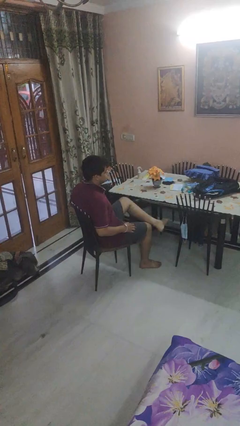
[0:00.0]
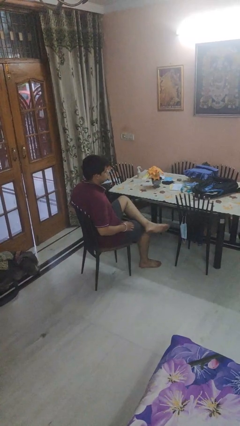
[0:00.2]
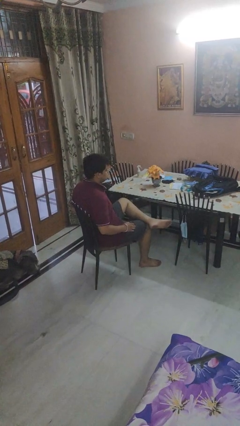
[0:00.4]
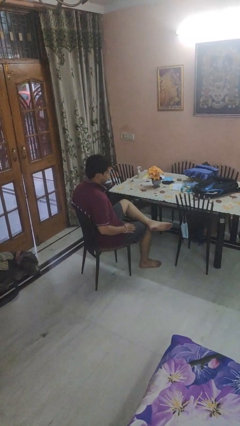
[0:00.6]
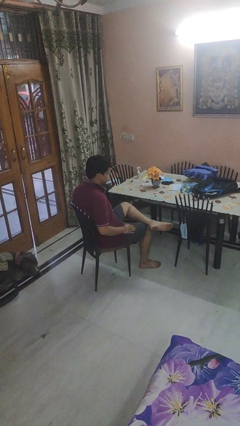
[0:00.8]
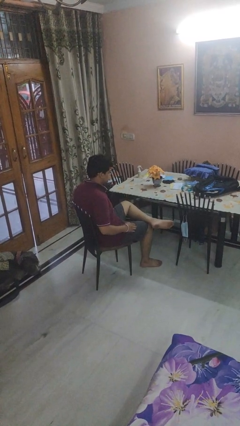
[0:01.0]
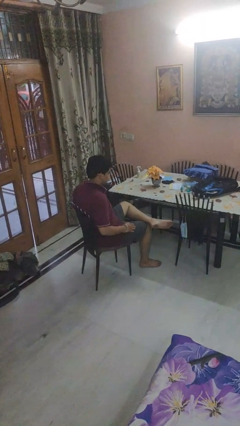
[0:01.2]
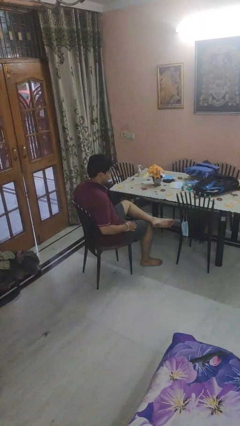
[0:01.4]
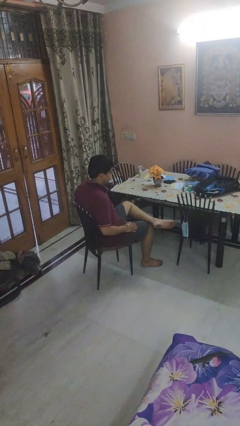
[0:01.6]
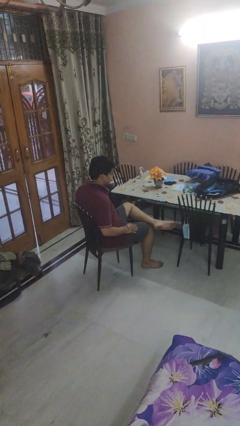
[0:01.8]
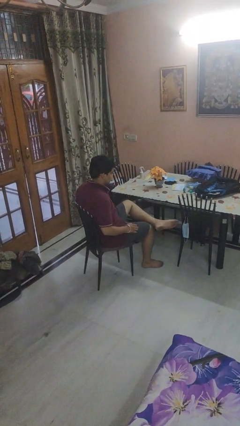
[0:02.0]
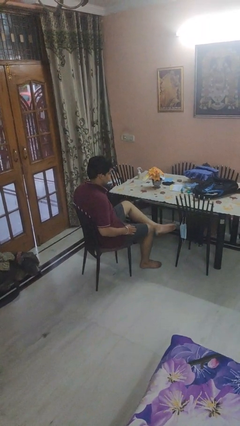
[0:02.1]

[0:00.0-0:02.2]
person crosses legs

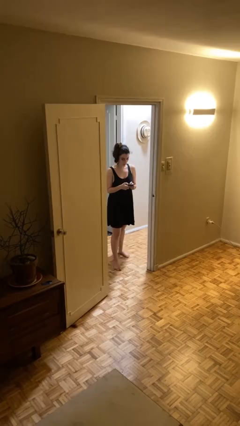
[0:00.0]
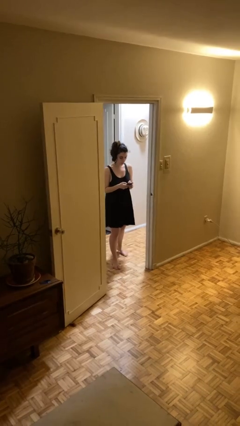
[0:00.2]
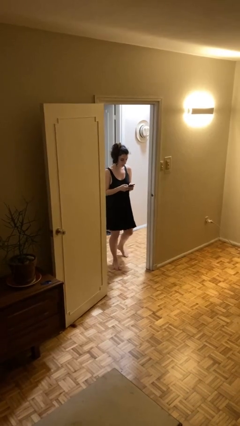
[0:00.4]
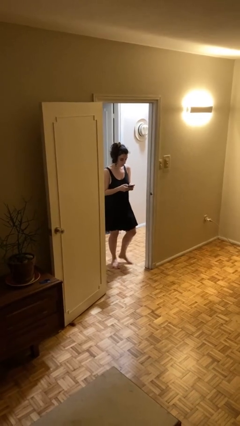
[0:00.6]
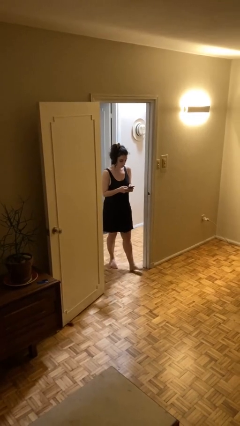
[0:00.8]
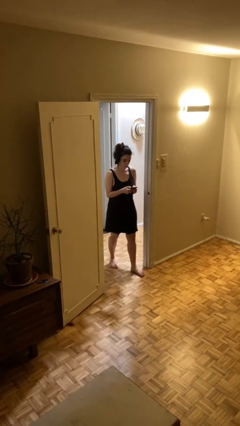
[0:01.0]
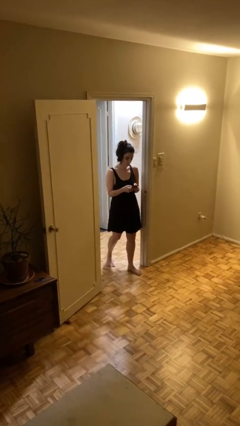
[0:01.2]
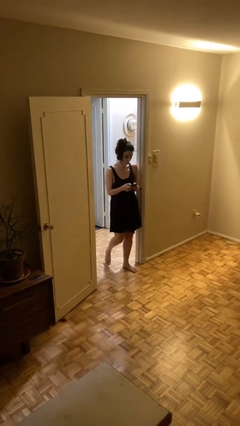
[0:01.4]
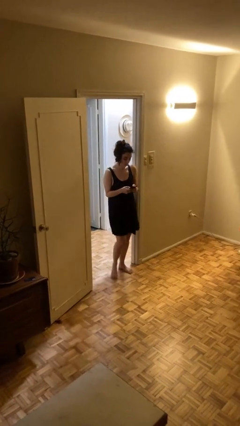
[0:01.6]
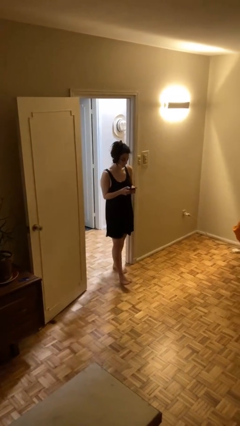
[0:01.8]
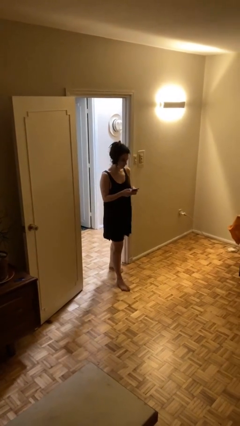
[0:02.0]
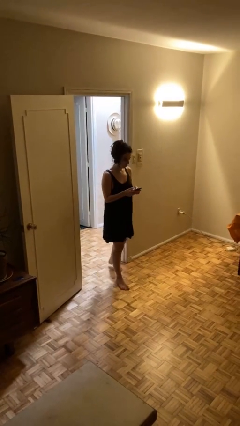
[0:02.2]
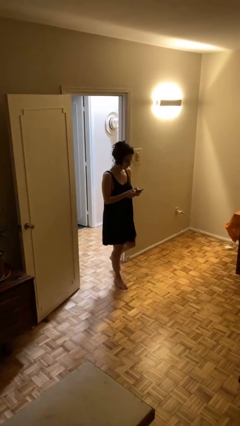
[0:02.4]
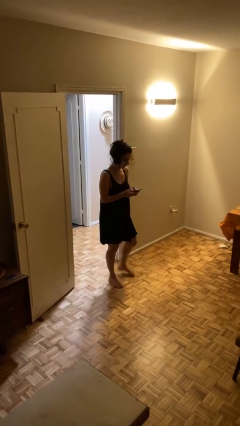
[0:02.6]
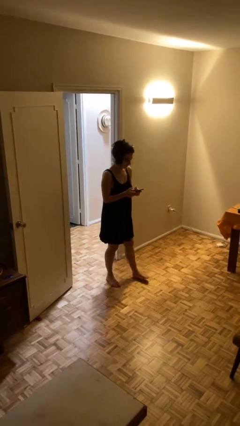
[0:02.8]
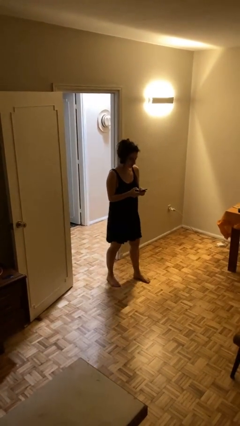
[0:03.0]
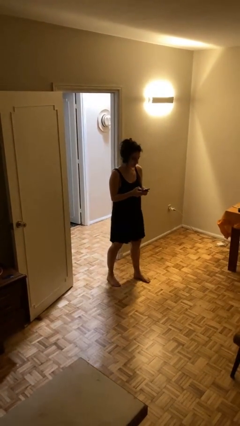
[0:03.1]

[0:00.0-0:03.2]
person enters scene through structure

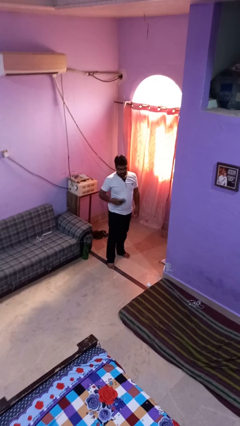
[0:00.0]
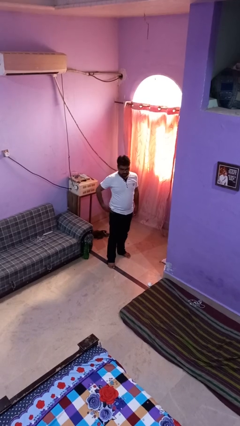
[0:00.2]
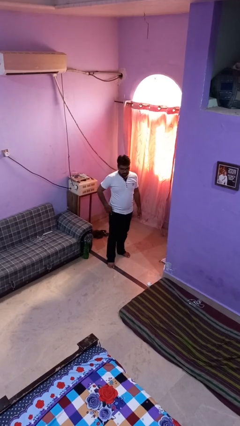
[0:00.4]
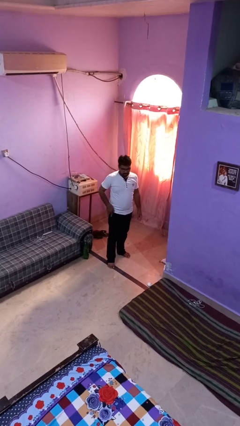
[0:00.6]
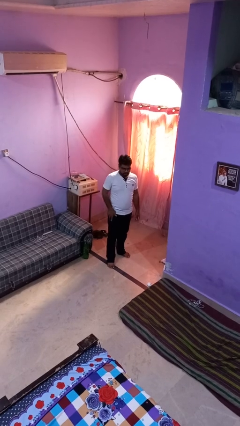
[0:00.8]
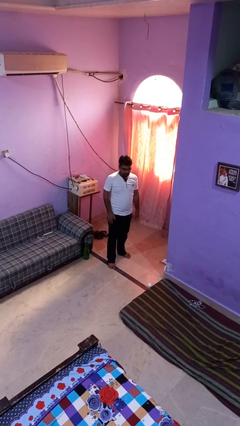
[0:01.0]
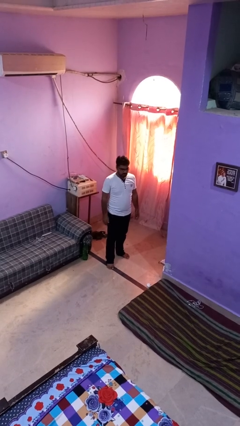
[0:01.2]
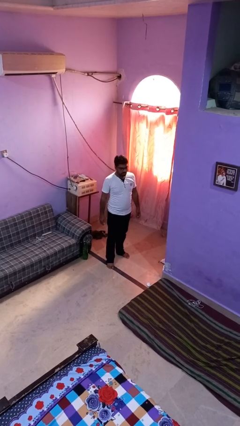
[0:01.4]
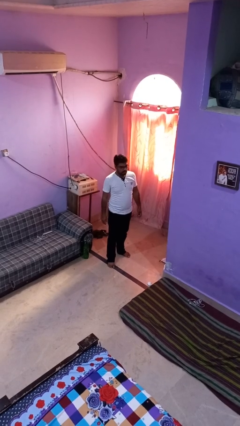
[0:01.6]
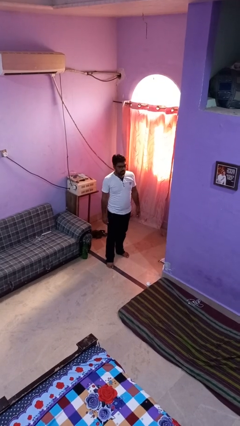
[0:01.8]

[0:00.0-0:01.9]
person puts phone into pocket

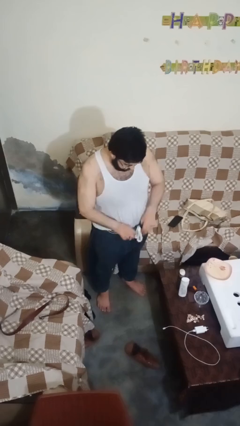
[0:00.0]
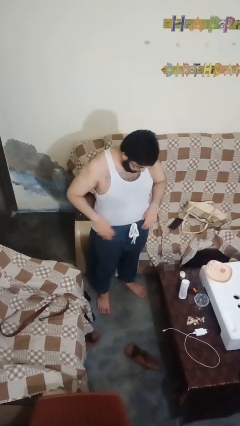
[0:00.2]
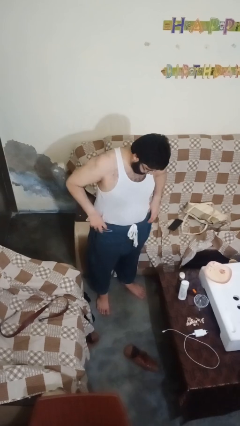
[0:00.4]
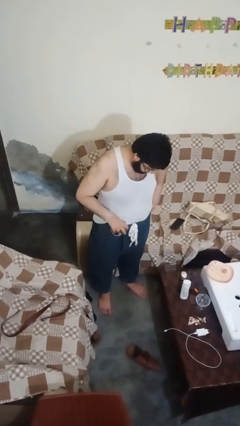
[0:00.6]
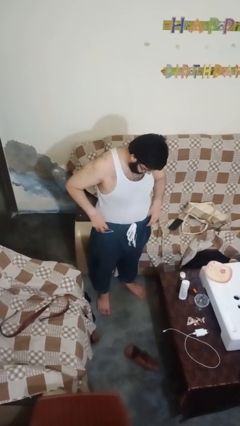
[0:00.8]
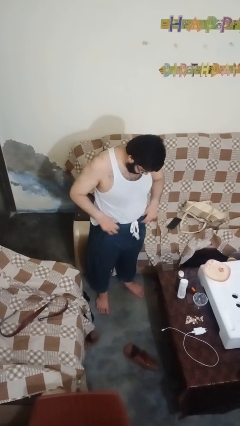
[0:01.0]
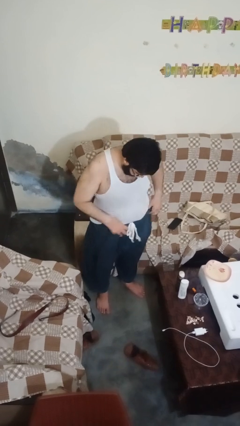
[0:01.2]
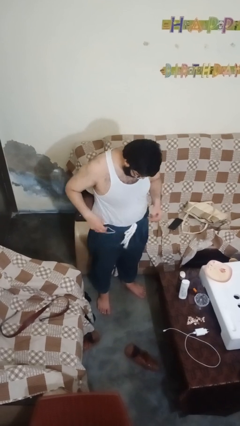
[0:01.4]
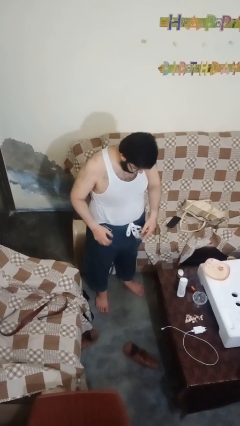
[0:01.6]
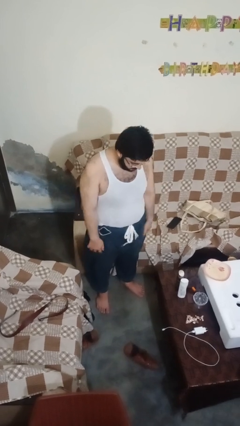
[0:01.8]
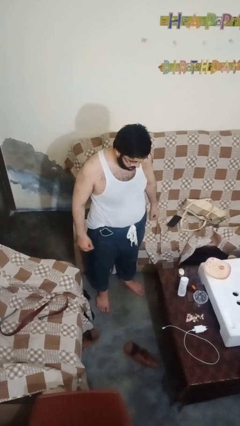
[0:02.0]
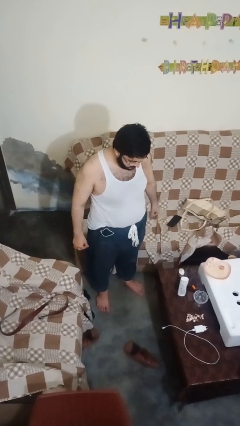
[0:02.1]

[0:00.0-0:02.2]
person hikes up pants

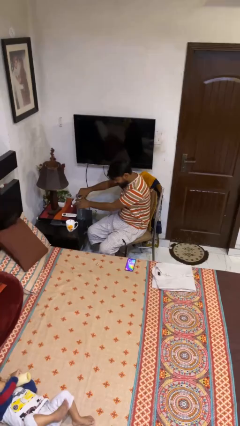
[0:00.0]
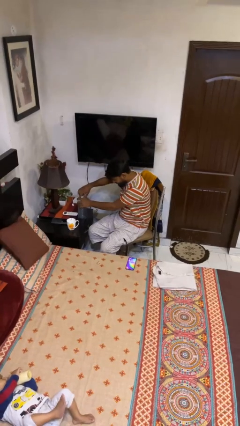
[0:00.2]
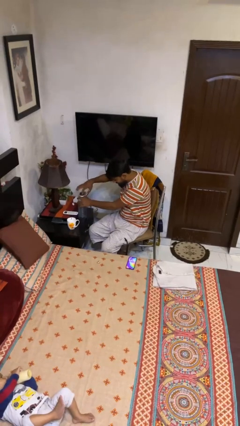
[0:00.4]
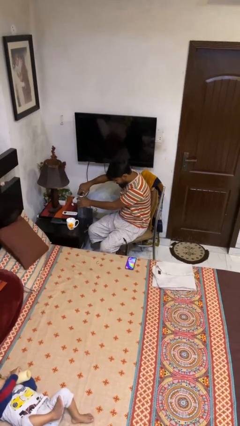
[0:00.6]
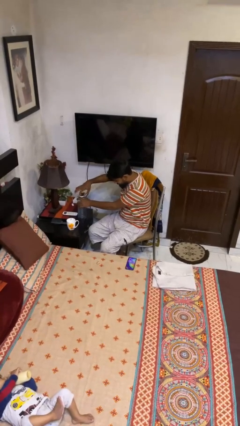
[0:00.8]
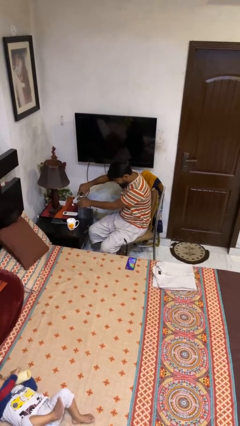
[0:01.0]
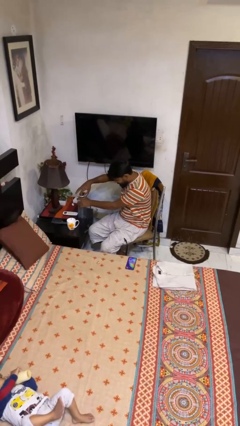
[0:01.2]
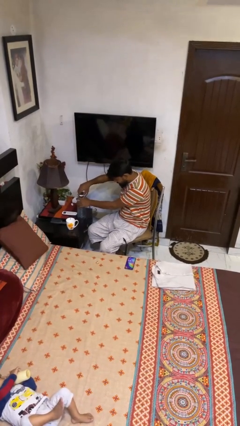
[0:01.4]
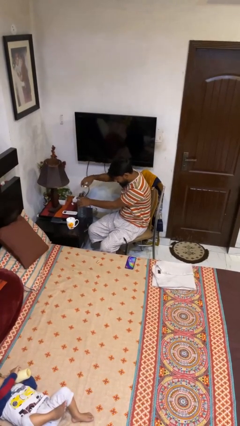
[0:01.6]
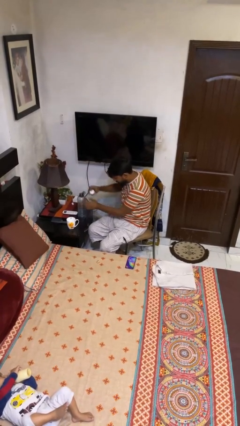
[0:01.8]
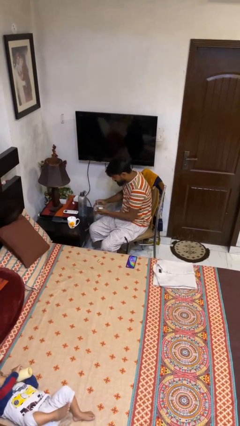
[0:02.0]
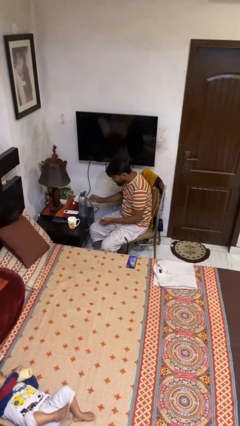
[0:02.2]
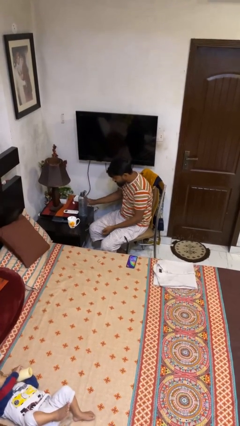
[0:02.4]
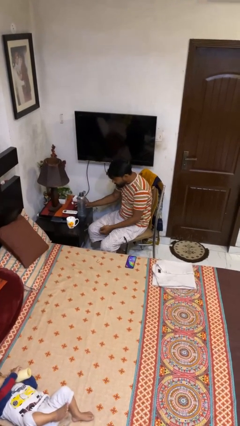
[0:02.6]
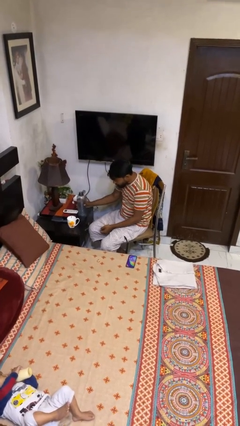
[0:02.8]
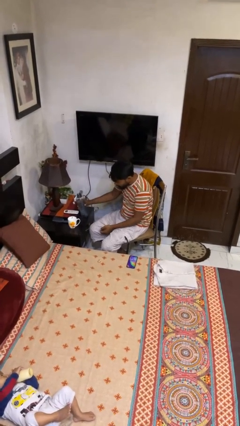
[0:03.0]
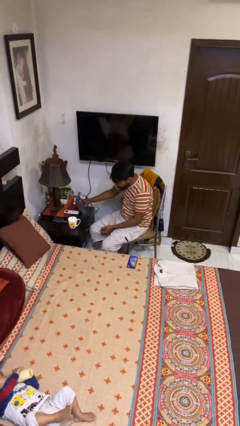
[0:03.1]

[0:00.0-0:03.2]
person unscrews lid from bottle

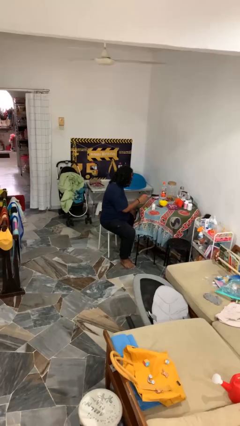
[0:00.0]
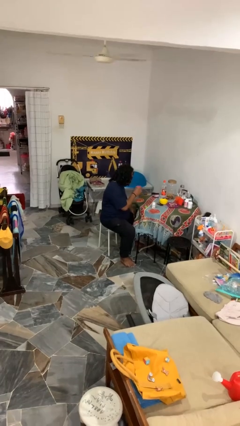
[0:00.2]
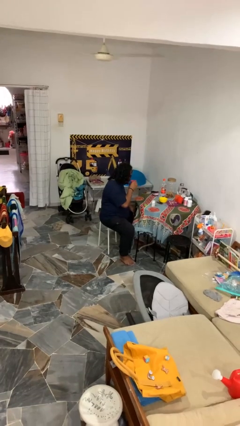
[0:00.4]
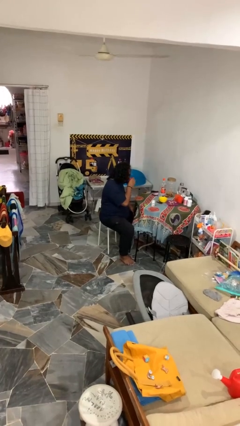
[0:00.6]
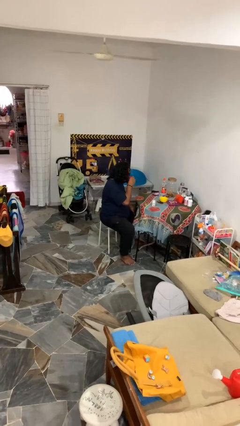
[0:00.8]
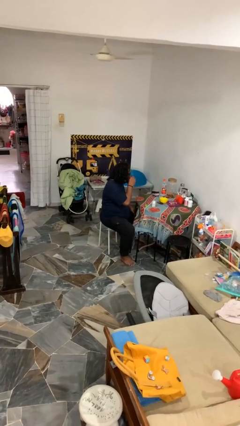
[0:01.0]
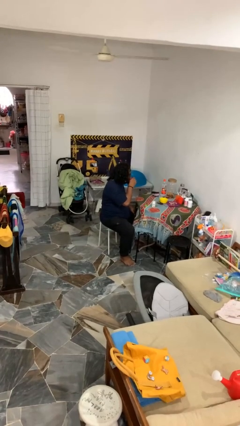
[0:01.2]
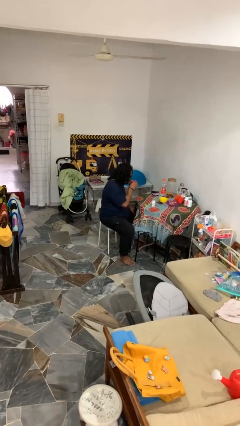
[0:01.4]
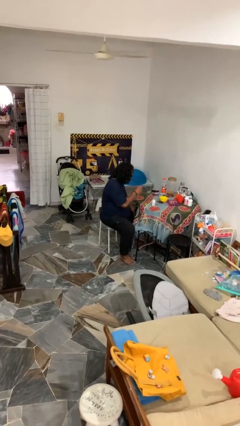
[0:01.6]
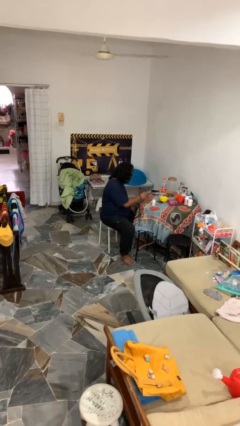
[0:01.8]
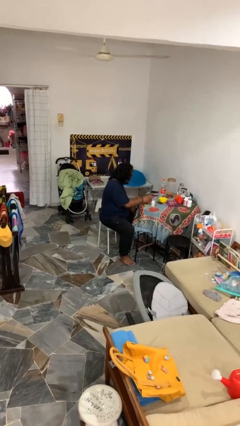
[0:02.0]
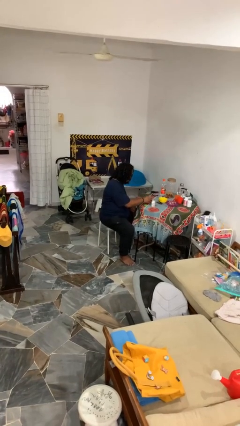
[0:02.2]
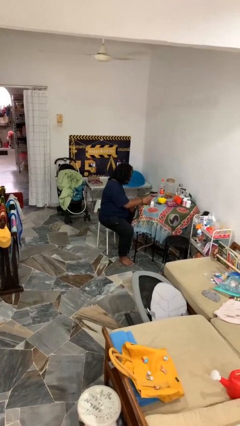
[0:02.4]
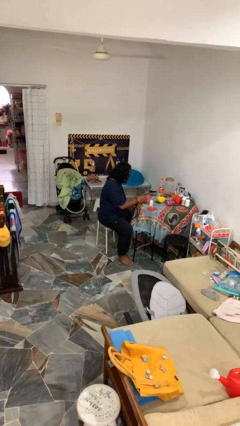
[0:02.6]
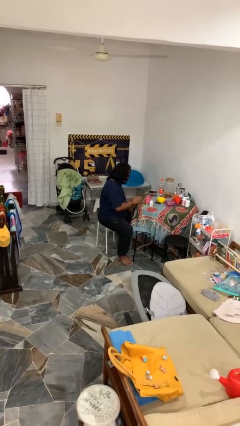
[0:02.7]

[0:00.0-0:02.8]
person drinks from cup

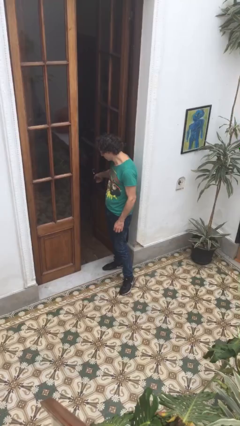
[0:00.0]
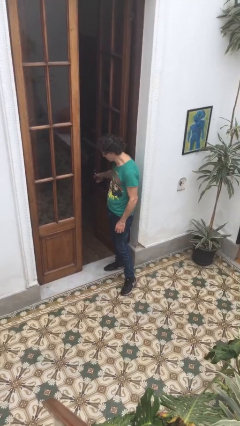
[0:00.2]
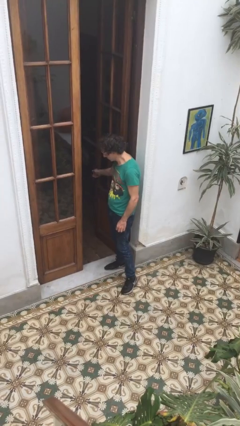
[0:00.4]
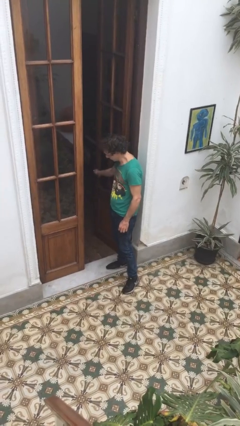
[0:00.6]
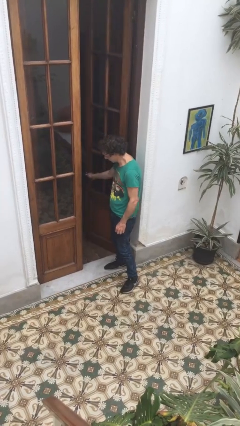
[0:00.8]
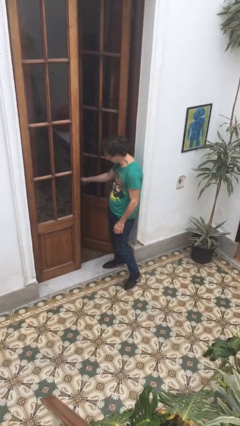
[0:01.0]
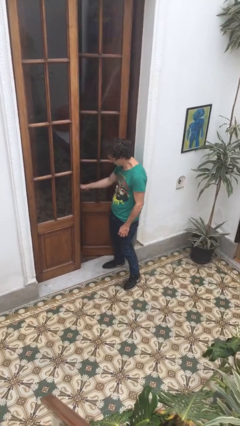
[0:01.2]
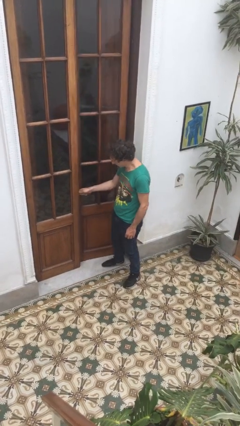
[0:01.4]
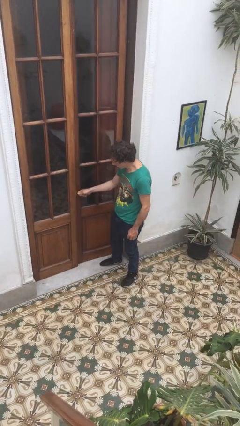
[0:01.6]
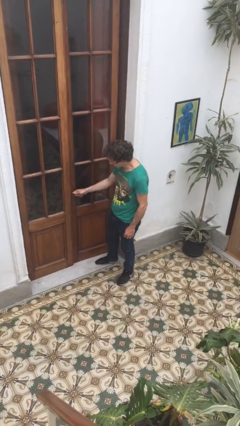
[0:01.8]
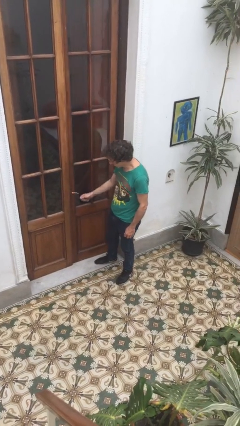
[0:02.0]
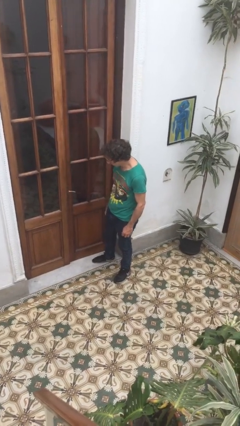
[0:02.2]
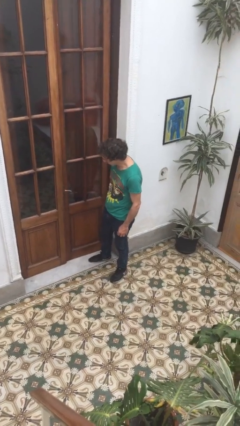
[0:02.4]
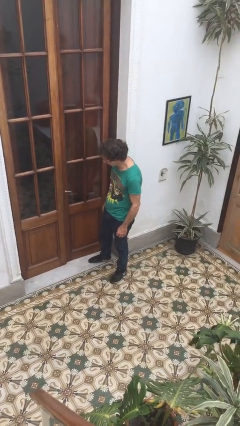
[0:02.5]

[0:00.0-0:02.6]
person closes facility door
